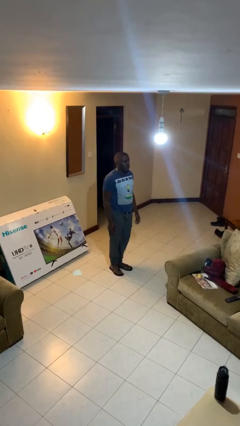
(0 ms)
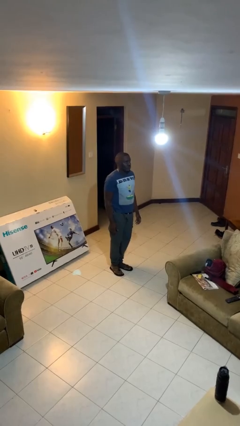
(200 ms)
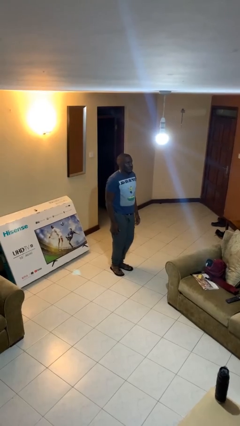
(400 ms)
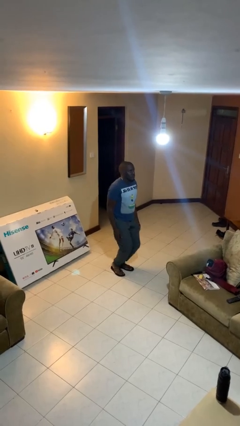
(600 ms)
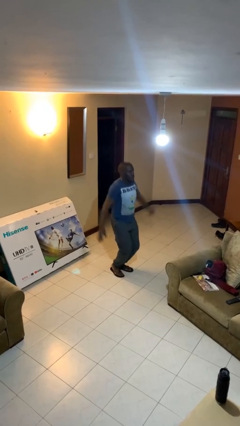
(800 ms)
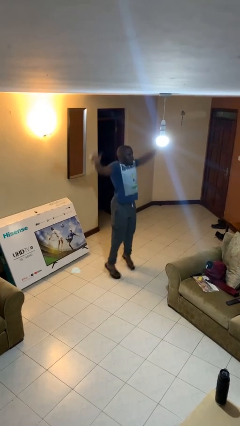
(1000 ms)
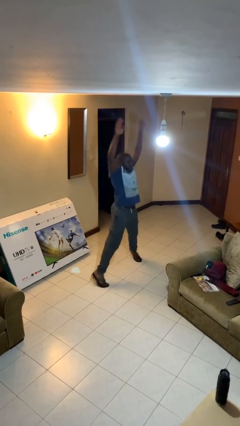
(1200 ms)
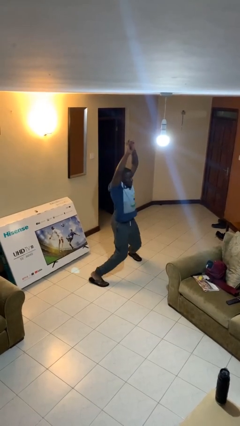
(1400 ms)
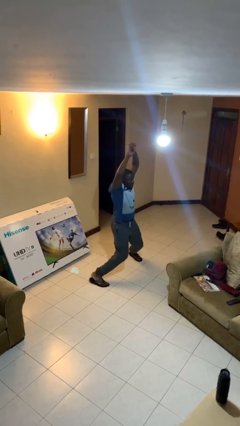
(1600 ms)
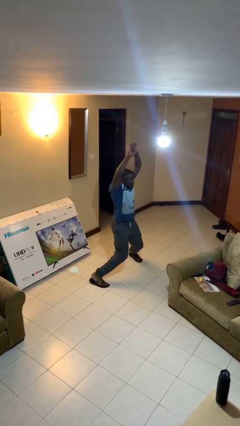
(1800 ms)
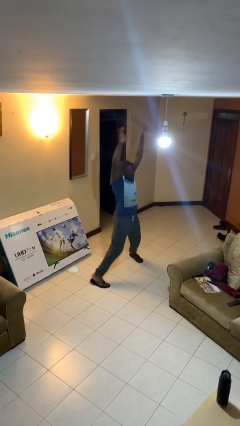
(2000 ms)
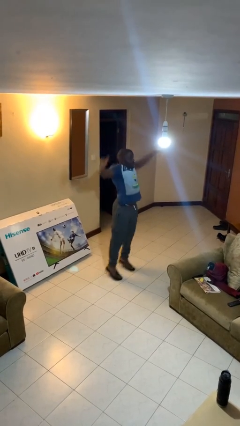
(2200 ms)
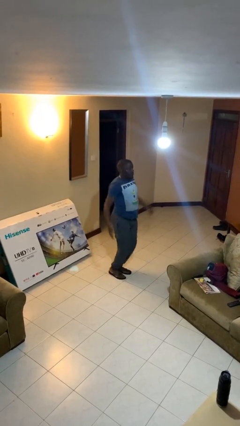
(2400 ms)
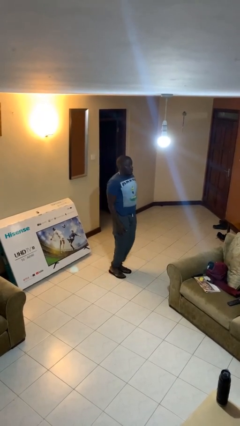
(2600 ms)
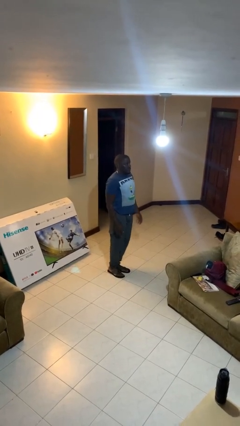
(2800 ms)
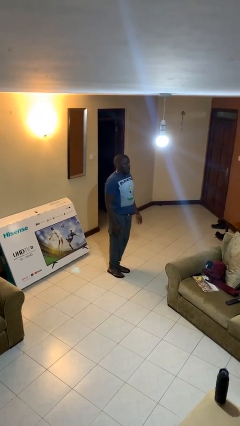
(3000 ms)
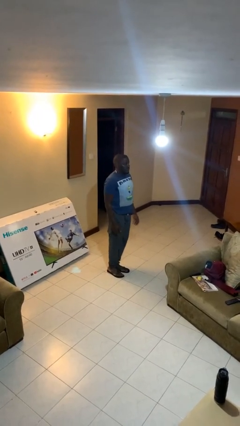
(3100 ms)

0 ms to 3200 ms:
person exercises with jumping jacks

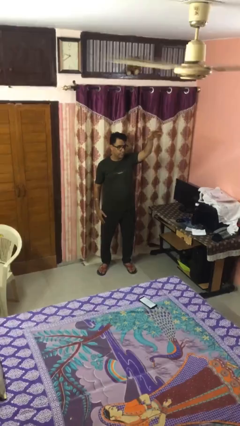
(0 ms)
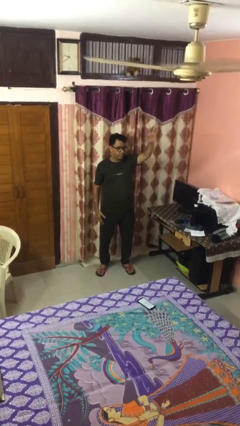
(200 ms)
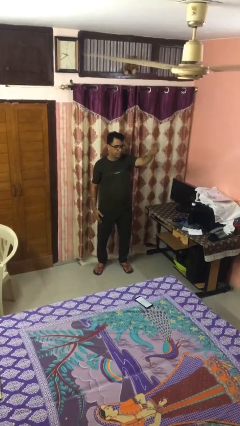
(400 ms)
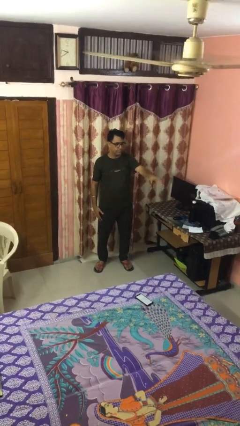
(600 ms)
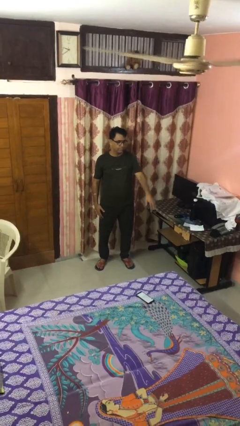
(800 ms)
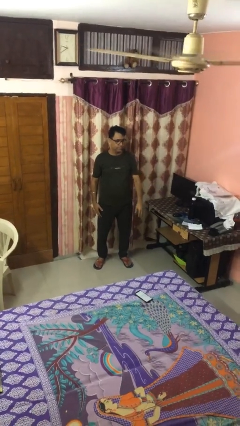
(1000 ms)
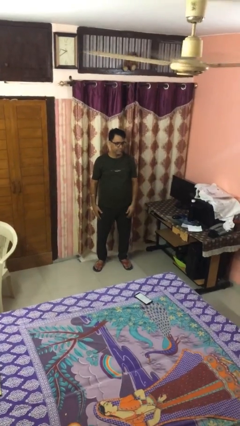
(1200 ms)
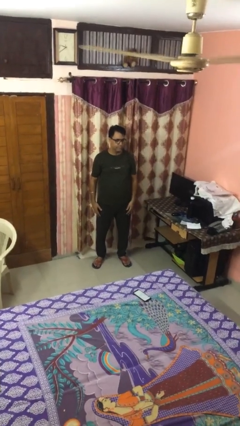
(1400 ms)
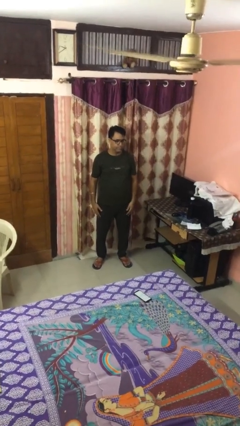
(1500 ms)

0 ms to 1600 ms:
person gestures swipe down

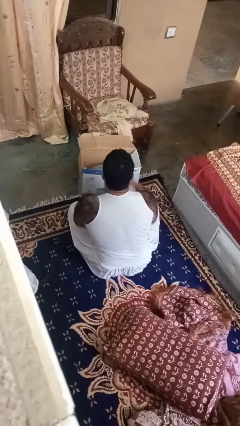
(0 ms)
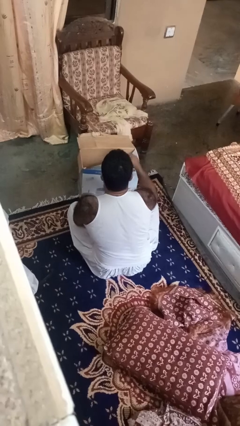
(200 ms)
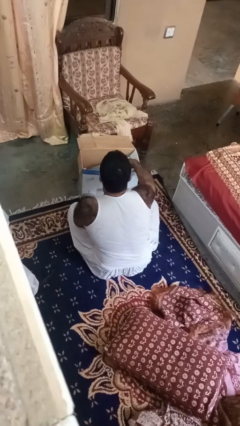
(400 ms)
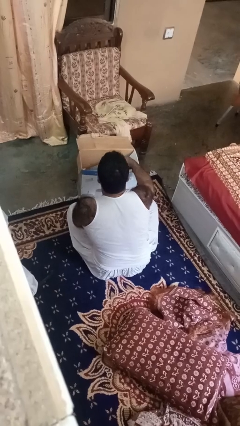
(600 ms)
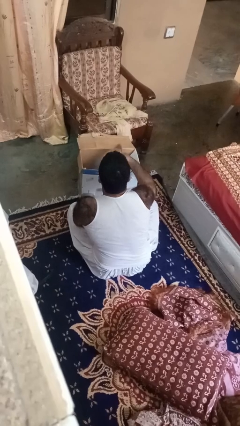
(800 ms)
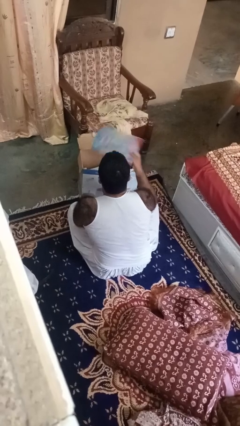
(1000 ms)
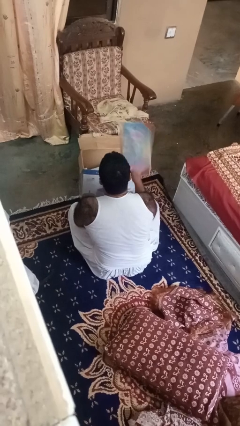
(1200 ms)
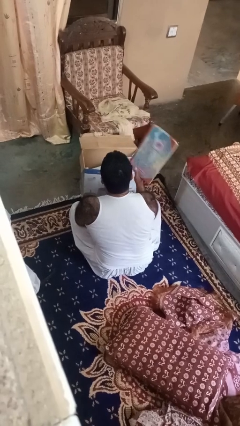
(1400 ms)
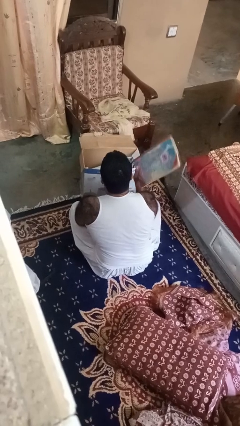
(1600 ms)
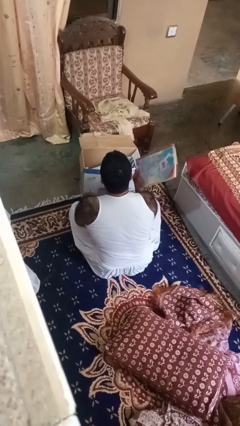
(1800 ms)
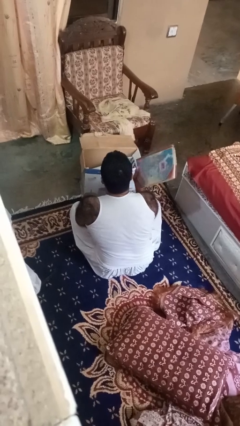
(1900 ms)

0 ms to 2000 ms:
person takes object from box

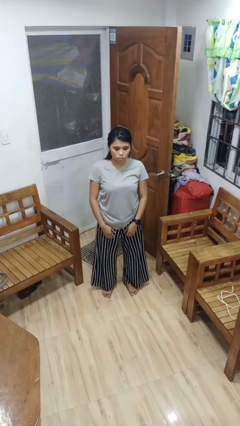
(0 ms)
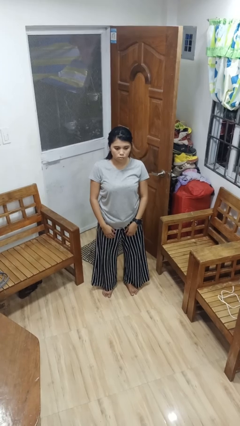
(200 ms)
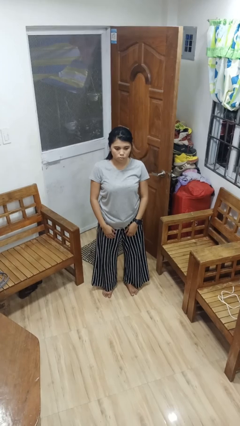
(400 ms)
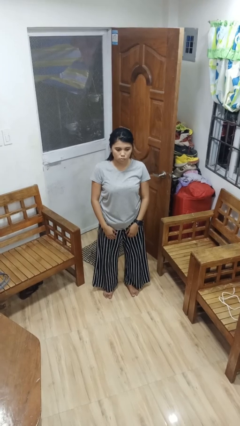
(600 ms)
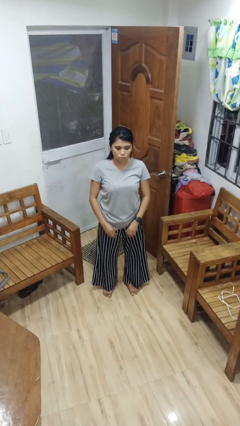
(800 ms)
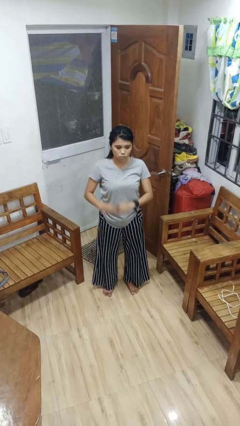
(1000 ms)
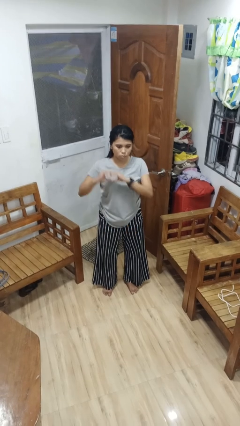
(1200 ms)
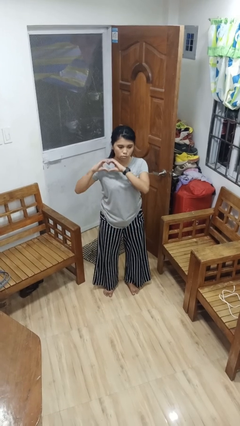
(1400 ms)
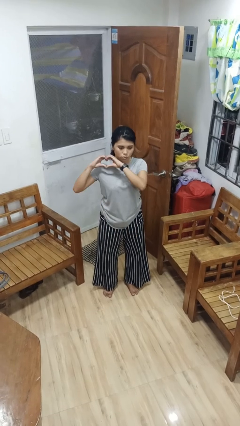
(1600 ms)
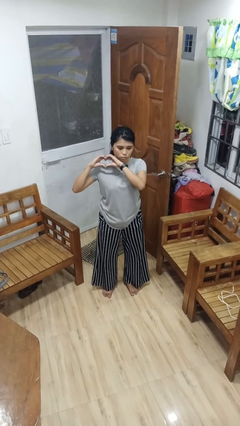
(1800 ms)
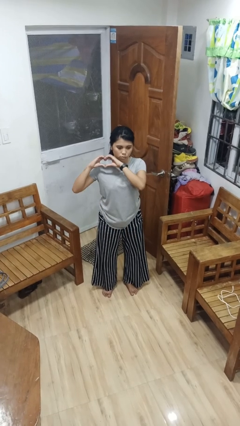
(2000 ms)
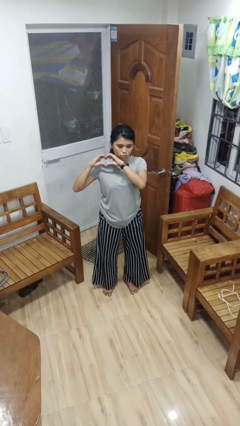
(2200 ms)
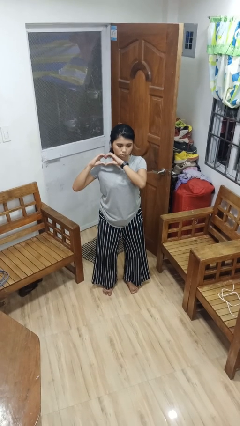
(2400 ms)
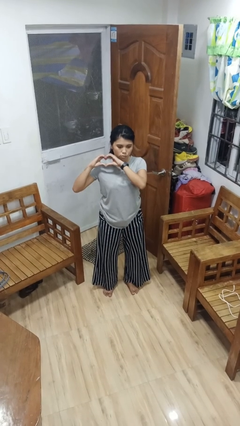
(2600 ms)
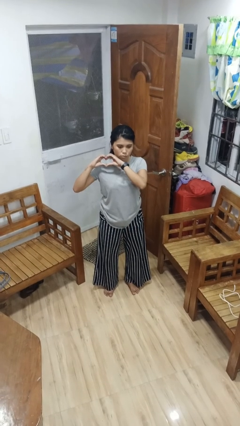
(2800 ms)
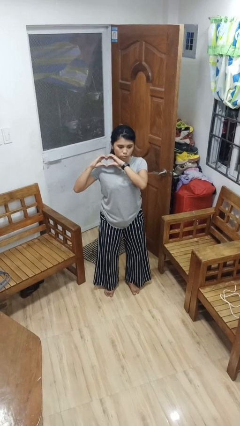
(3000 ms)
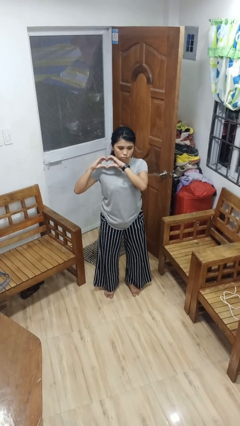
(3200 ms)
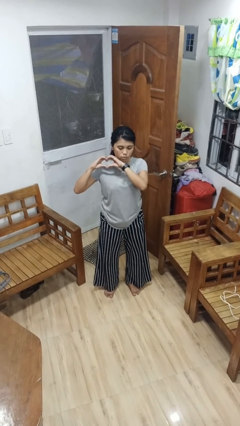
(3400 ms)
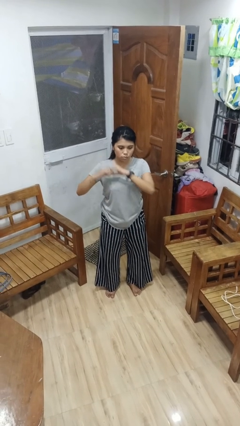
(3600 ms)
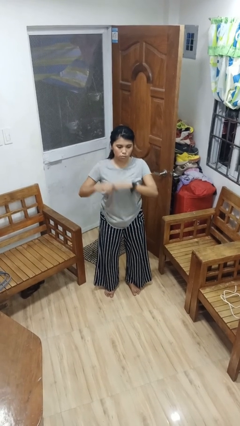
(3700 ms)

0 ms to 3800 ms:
person gestures heart

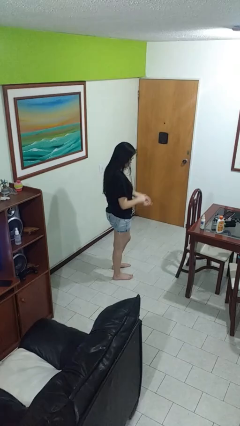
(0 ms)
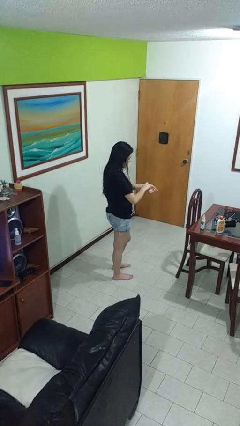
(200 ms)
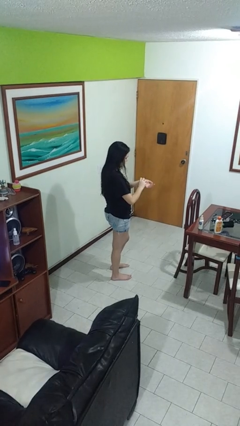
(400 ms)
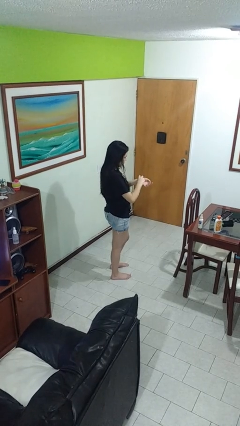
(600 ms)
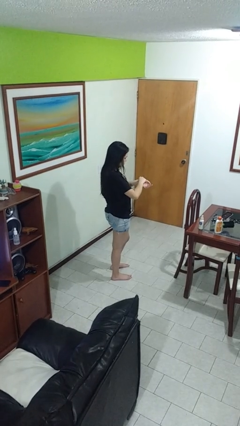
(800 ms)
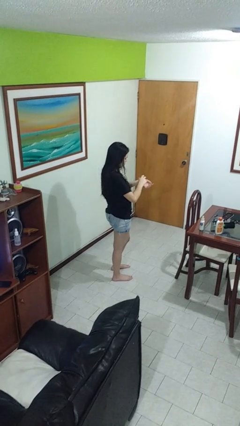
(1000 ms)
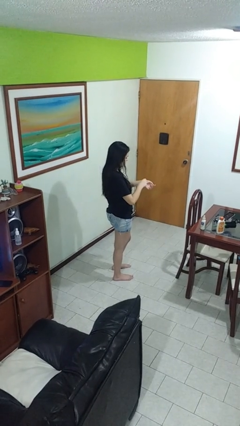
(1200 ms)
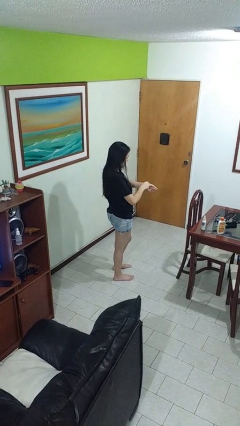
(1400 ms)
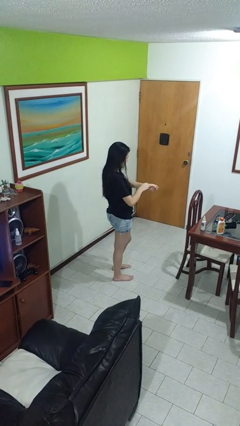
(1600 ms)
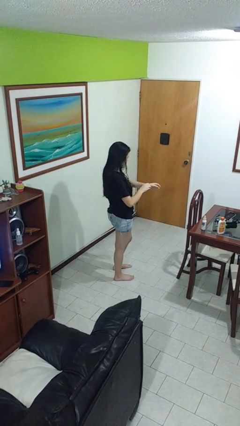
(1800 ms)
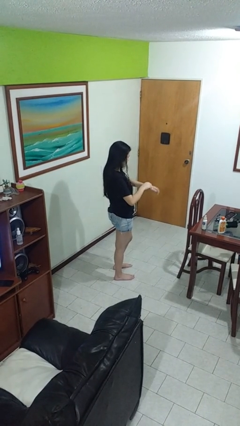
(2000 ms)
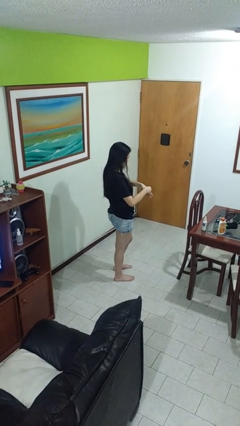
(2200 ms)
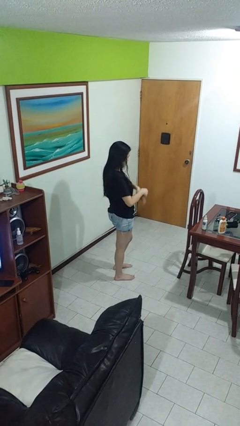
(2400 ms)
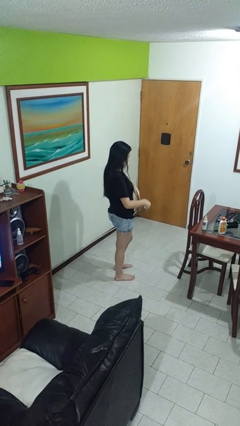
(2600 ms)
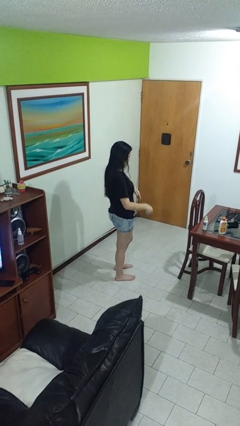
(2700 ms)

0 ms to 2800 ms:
person takes off wristwatch

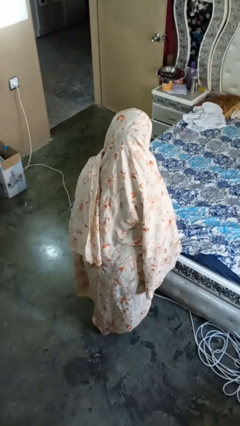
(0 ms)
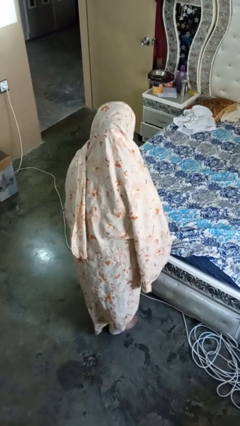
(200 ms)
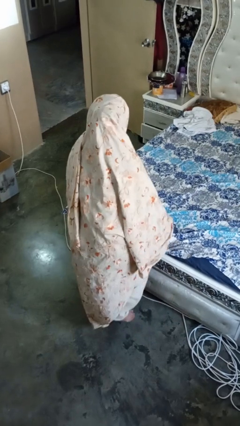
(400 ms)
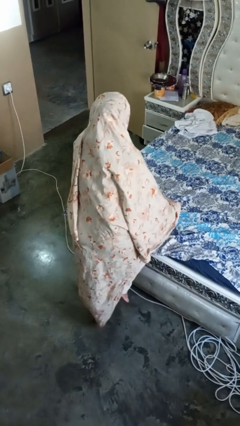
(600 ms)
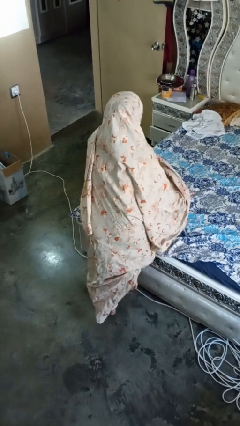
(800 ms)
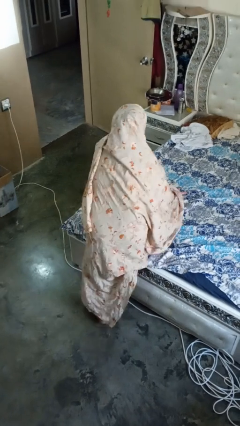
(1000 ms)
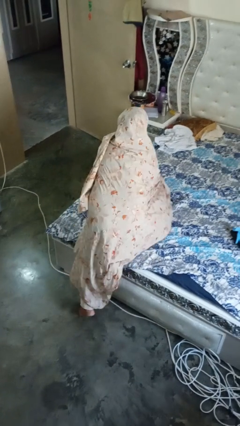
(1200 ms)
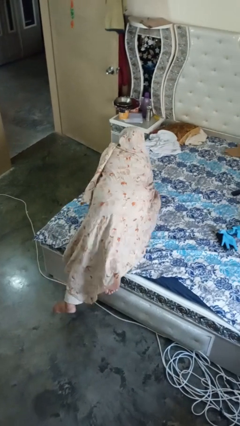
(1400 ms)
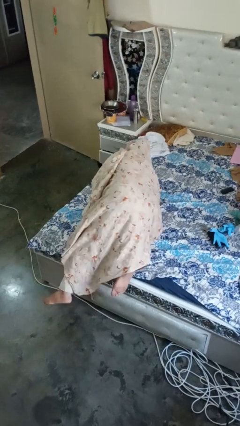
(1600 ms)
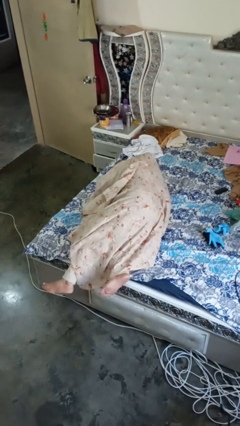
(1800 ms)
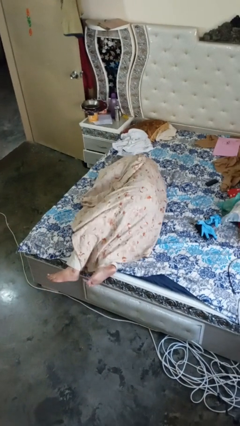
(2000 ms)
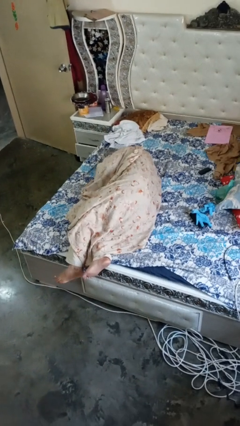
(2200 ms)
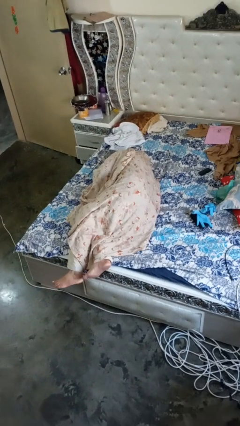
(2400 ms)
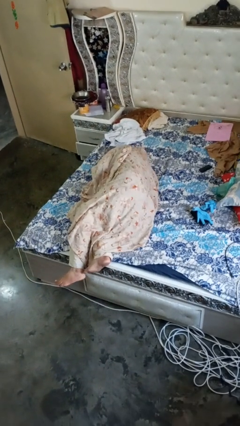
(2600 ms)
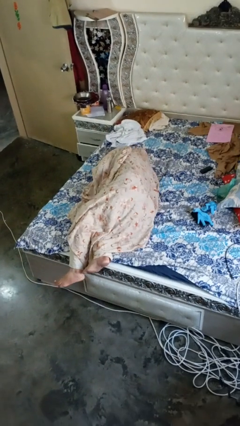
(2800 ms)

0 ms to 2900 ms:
person lies down on bed

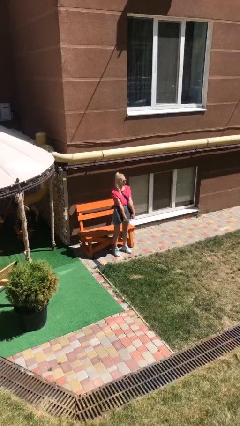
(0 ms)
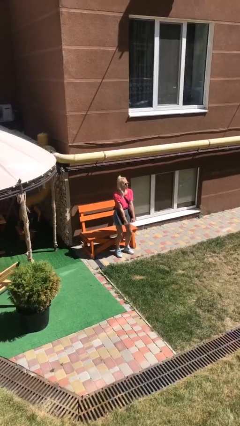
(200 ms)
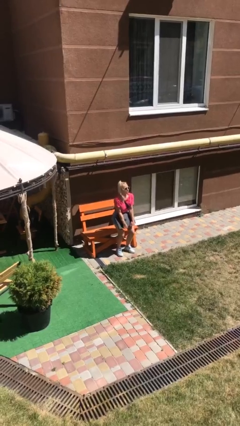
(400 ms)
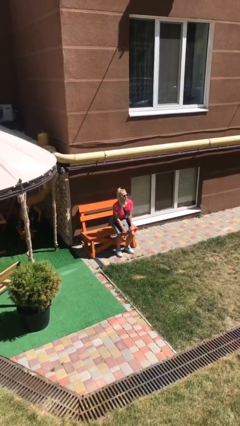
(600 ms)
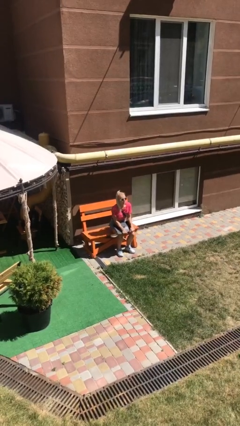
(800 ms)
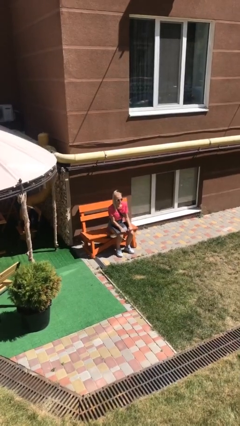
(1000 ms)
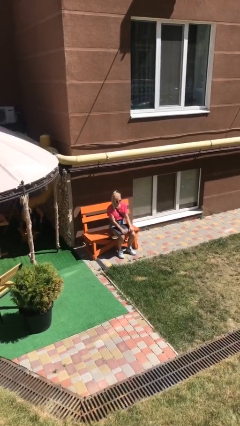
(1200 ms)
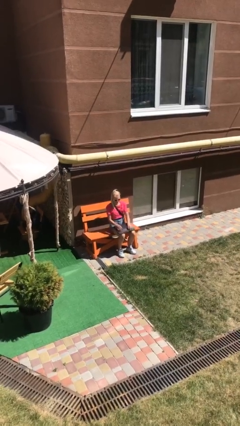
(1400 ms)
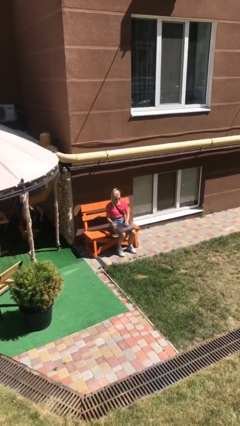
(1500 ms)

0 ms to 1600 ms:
person sits down
